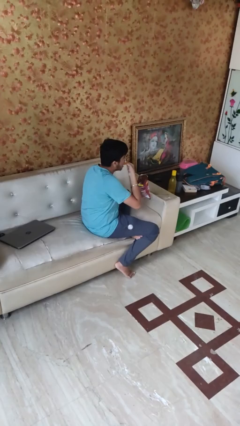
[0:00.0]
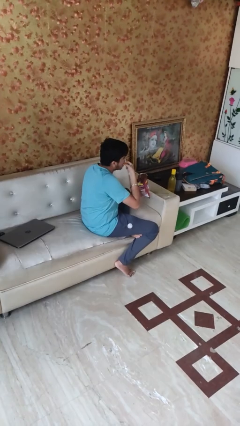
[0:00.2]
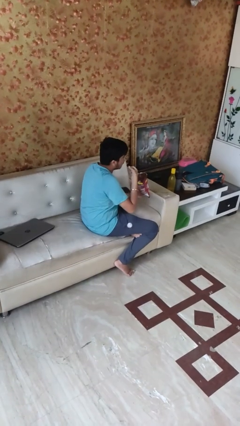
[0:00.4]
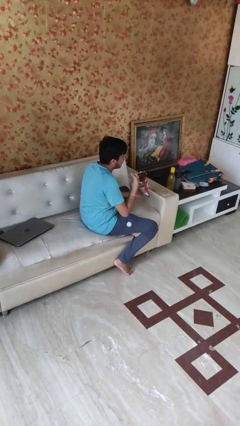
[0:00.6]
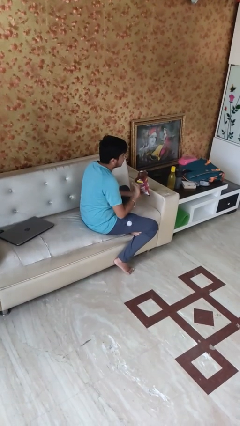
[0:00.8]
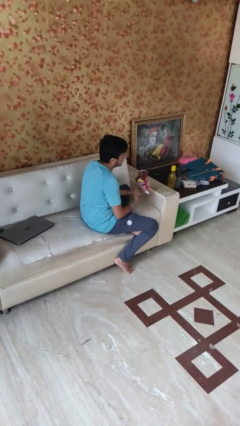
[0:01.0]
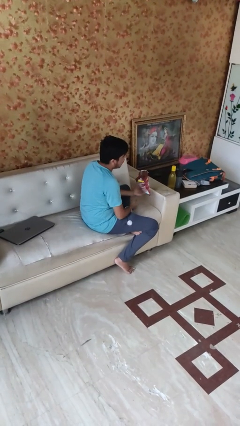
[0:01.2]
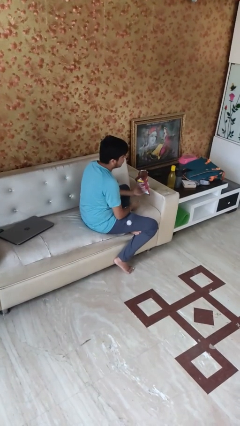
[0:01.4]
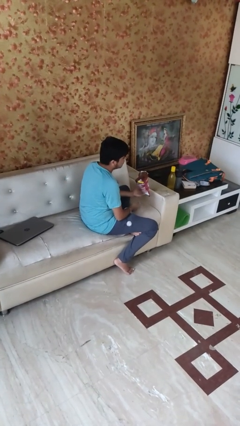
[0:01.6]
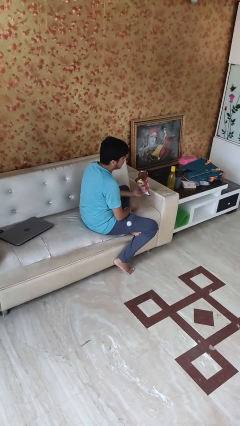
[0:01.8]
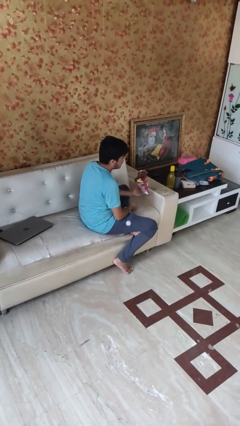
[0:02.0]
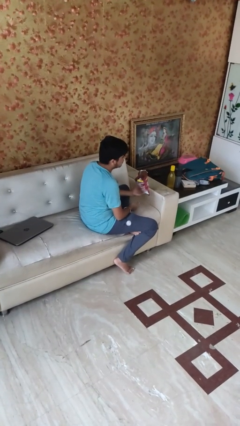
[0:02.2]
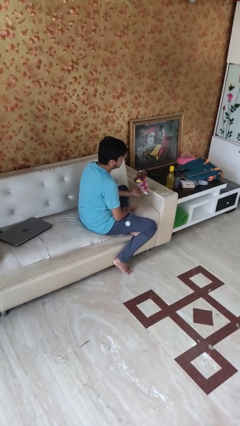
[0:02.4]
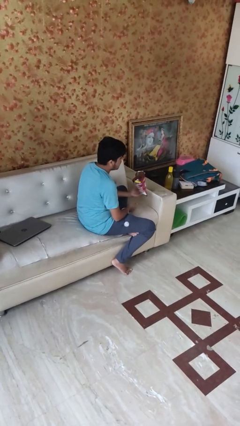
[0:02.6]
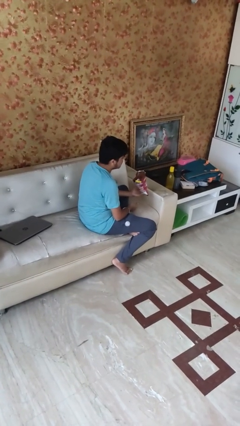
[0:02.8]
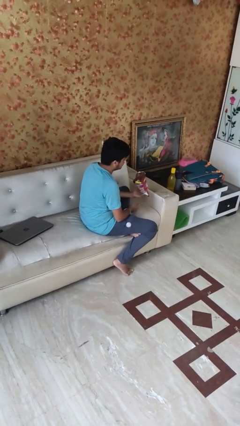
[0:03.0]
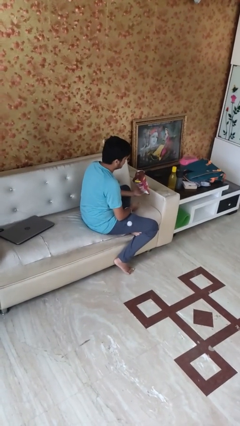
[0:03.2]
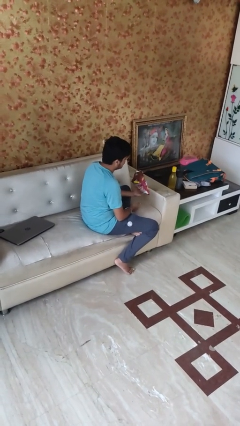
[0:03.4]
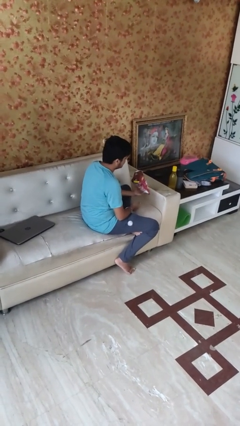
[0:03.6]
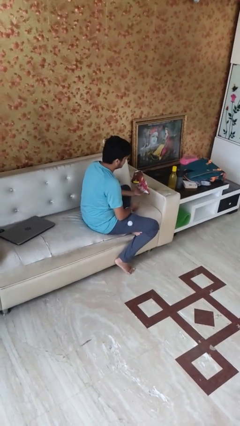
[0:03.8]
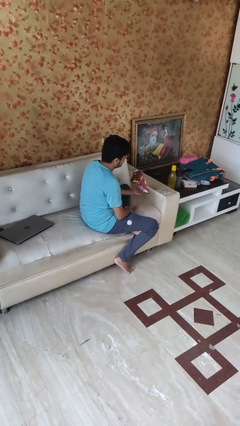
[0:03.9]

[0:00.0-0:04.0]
person eats snack from bag

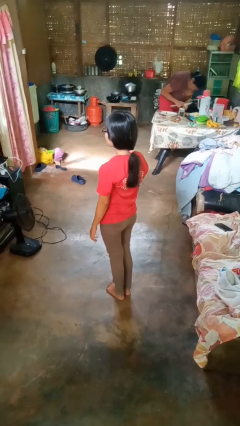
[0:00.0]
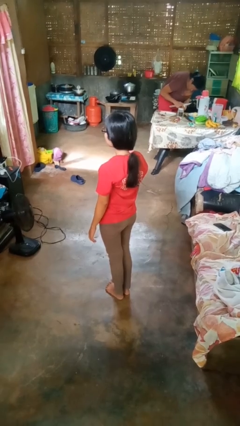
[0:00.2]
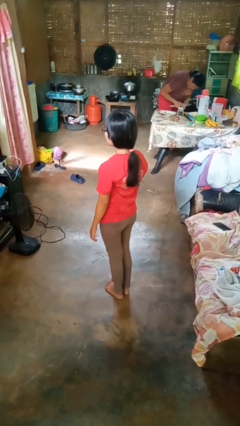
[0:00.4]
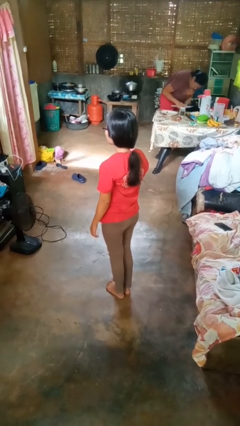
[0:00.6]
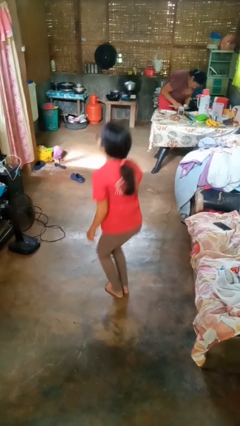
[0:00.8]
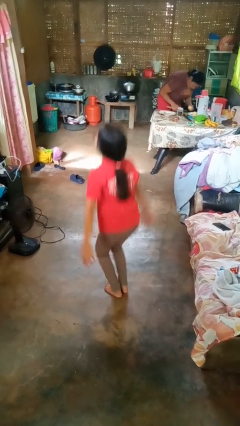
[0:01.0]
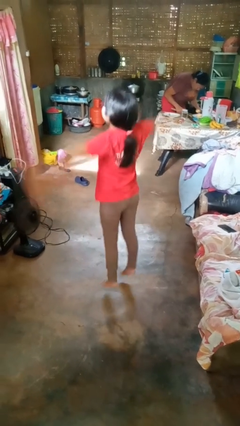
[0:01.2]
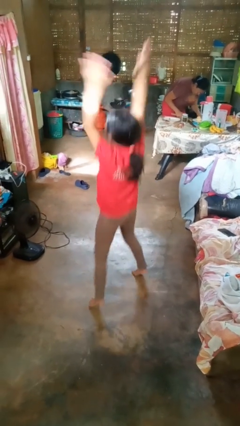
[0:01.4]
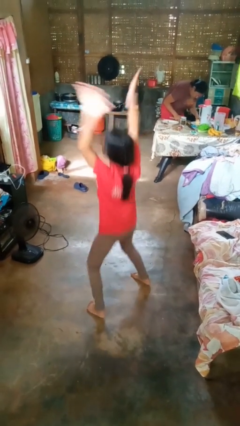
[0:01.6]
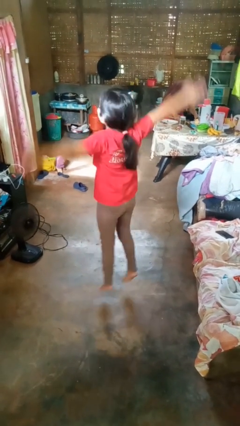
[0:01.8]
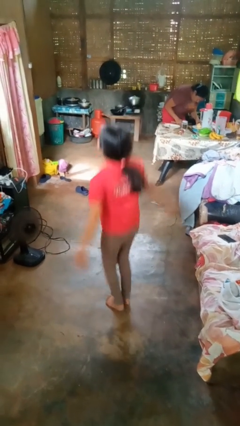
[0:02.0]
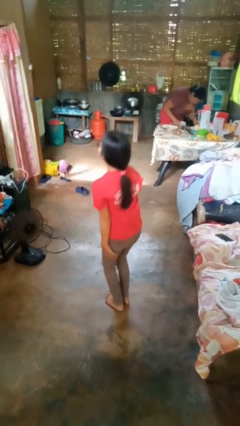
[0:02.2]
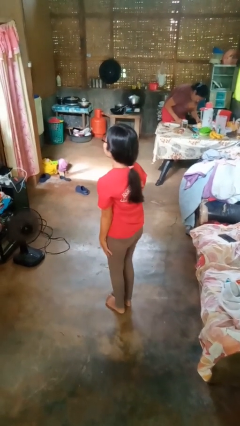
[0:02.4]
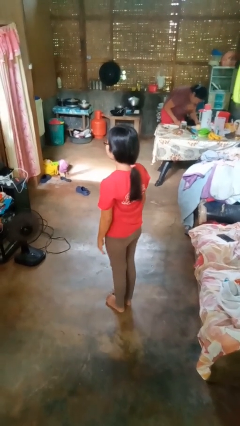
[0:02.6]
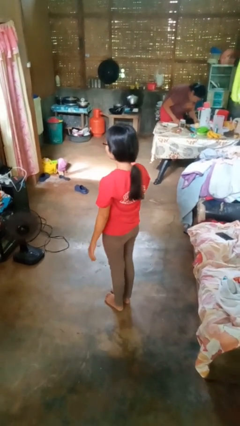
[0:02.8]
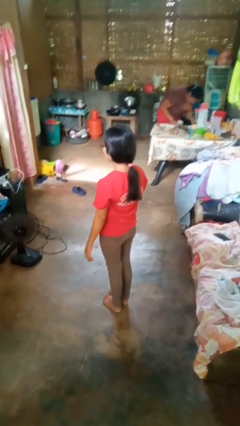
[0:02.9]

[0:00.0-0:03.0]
person exercises with jumping jacks

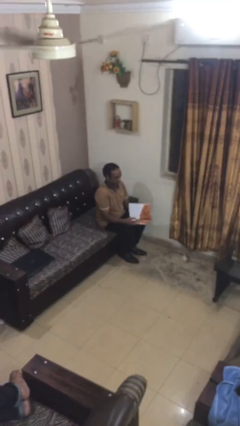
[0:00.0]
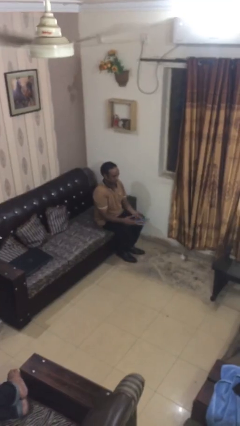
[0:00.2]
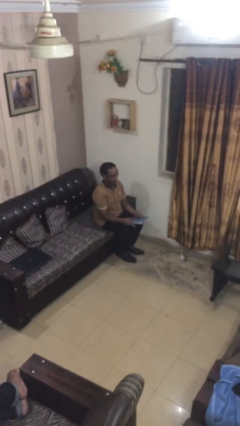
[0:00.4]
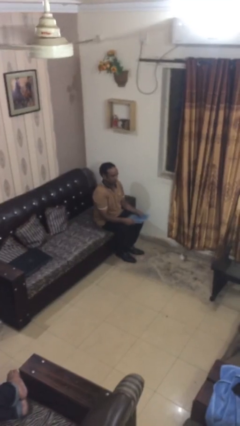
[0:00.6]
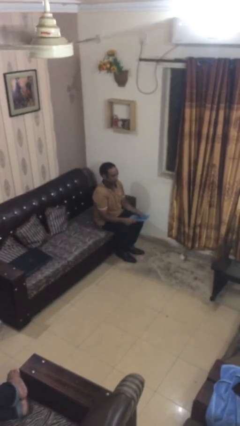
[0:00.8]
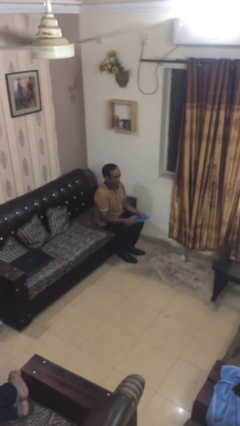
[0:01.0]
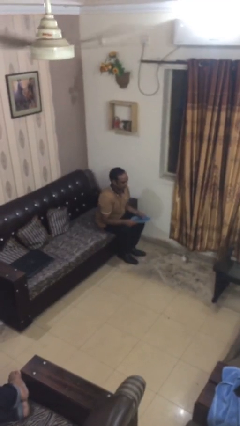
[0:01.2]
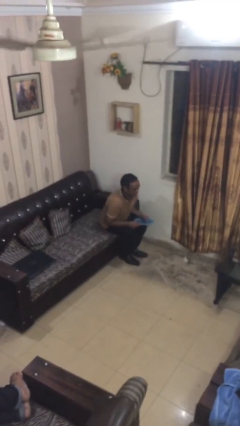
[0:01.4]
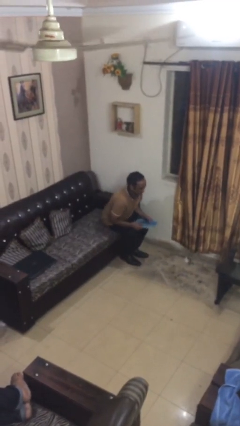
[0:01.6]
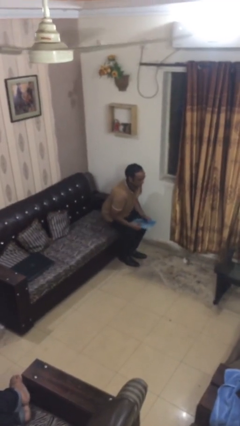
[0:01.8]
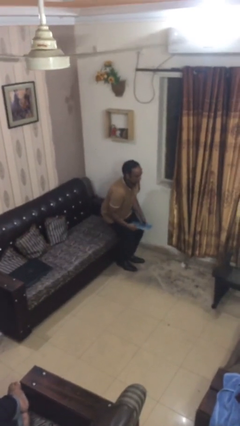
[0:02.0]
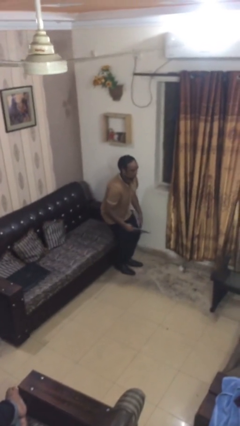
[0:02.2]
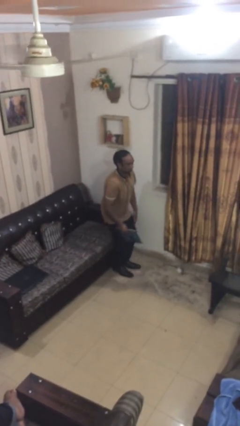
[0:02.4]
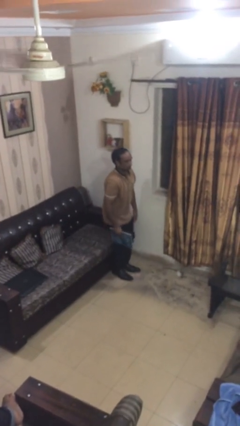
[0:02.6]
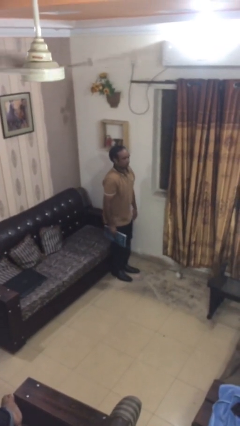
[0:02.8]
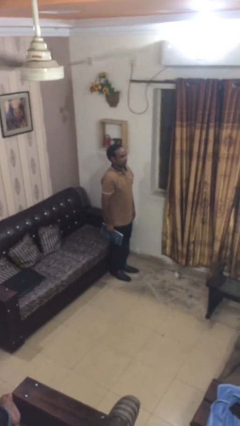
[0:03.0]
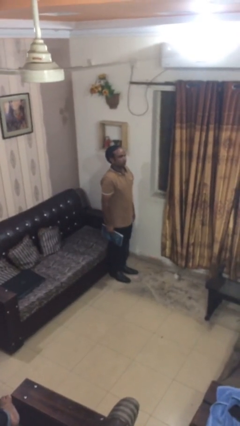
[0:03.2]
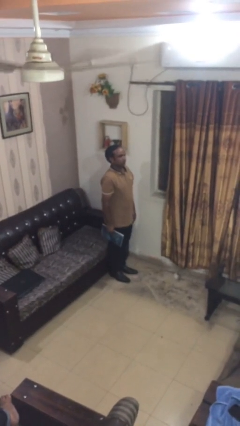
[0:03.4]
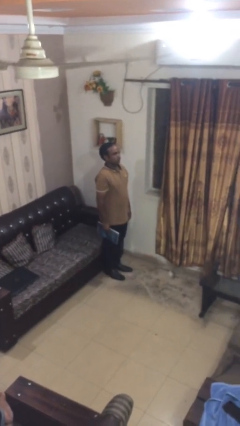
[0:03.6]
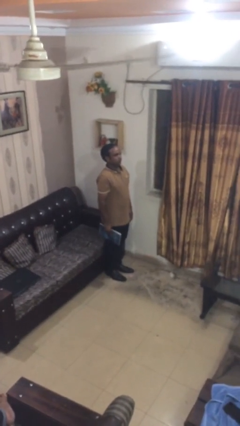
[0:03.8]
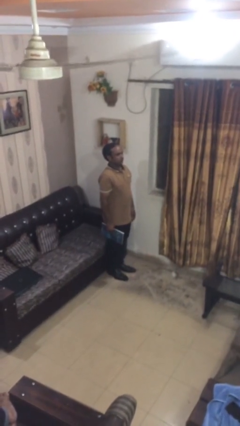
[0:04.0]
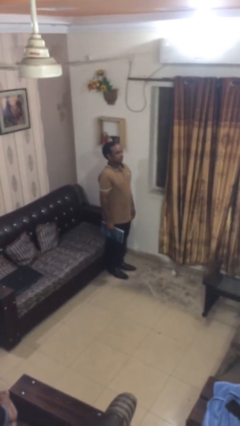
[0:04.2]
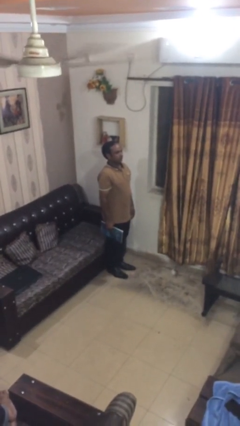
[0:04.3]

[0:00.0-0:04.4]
person stands up

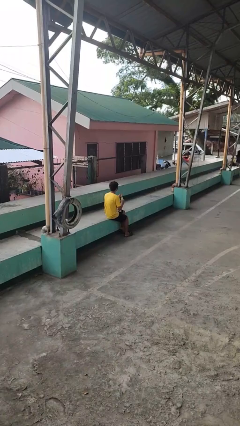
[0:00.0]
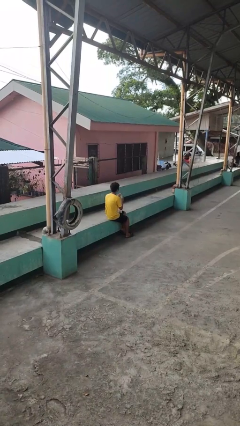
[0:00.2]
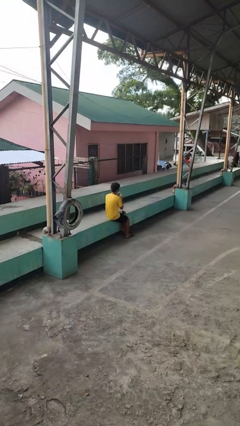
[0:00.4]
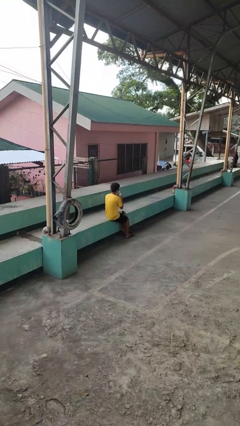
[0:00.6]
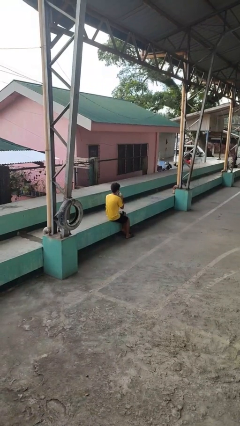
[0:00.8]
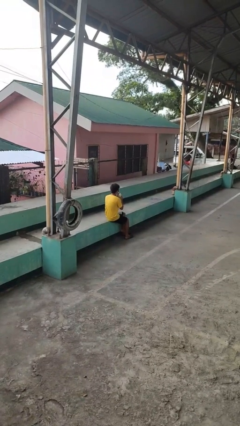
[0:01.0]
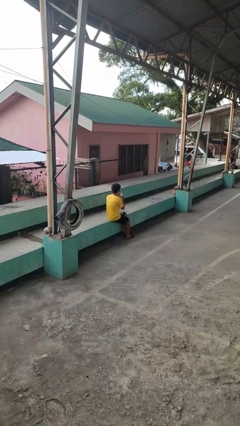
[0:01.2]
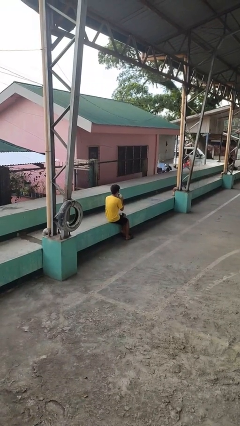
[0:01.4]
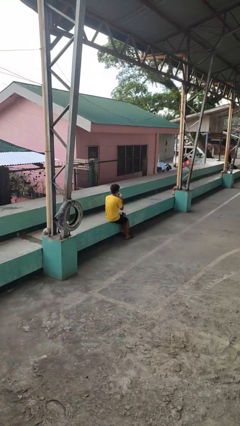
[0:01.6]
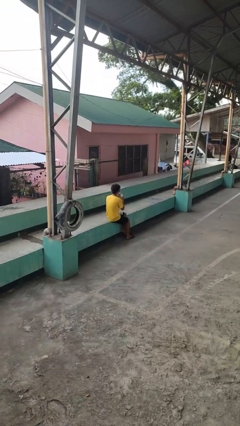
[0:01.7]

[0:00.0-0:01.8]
person drinks from straw

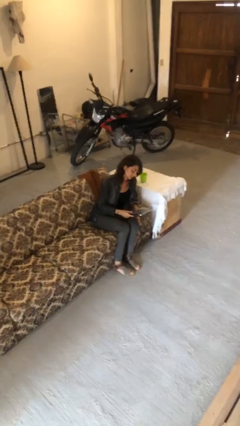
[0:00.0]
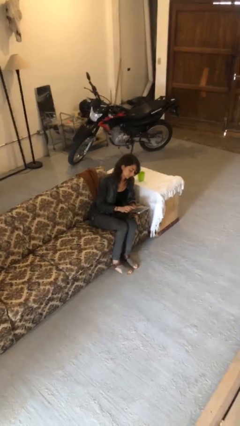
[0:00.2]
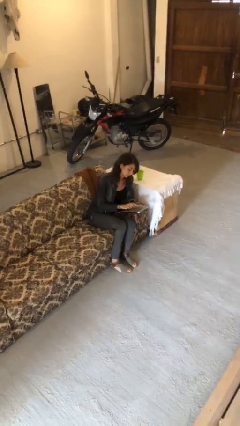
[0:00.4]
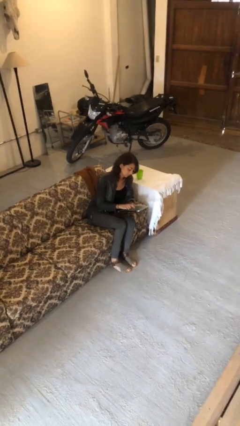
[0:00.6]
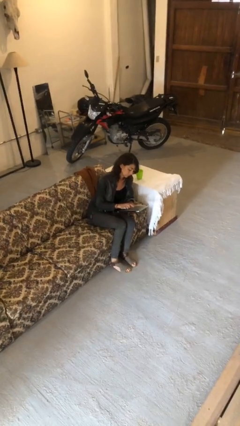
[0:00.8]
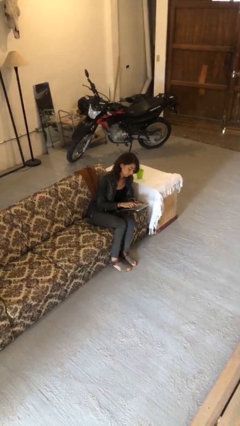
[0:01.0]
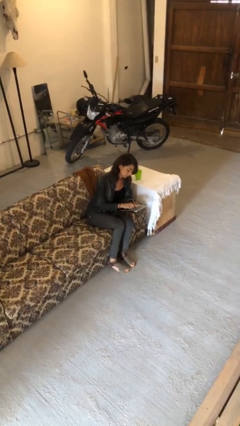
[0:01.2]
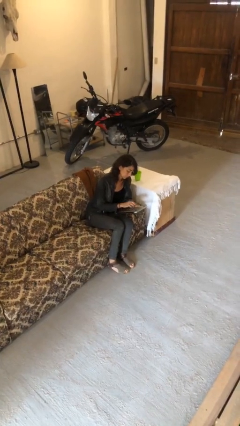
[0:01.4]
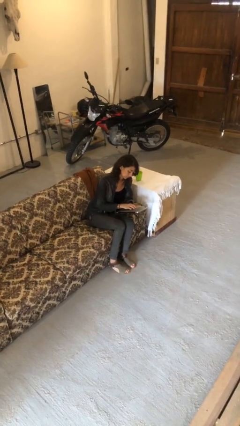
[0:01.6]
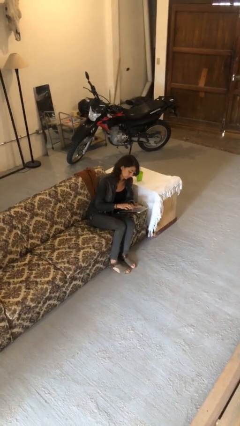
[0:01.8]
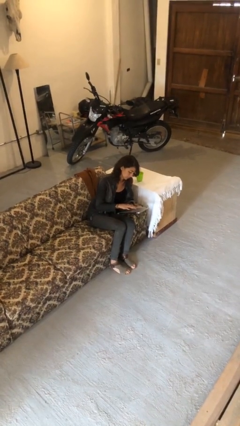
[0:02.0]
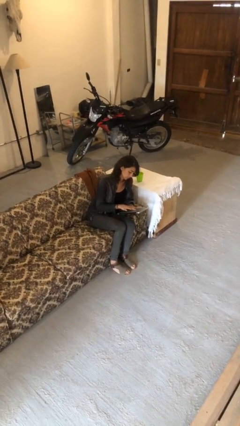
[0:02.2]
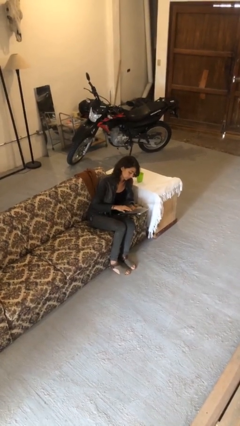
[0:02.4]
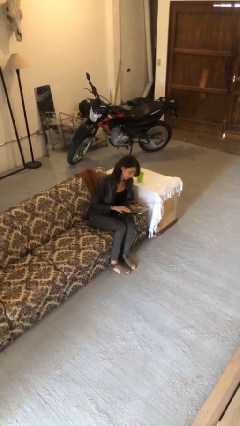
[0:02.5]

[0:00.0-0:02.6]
person interacts with tablet

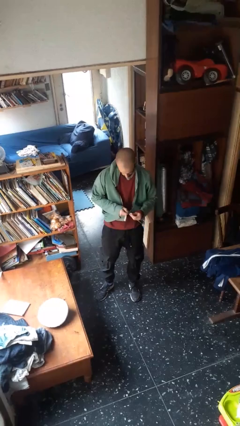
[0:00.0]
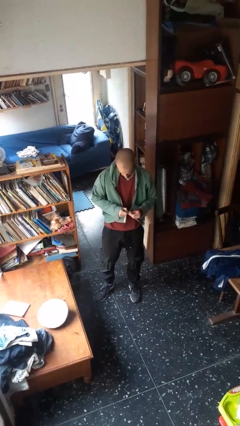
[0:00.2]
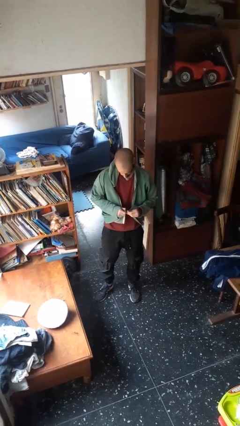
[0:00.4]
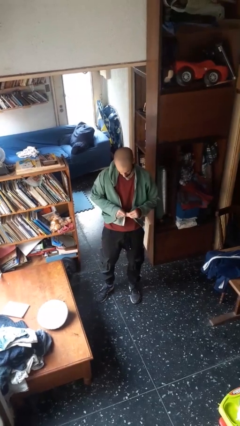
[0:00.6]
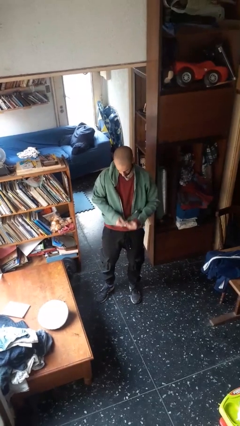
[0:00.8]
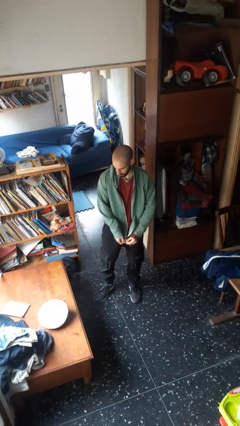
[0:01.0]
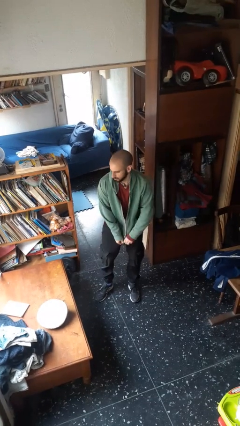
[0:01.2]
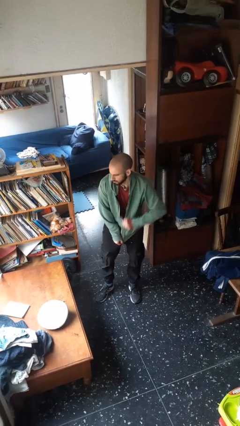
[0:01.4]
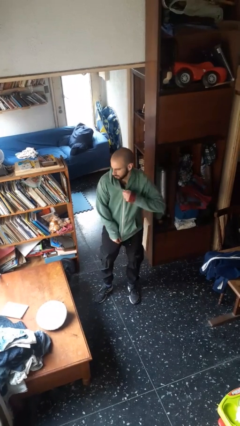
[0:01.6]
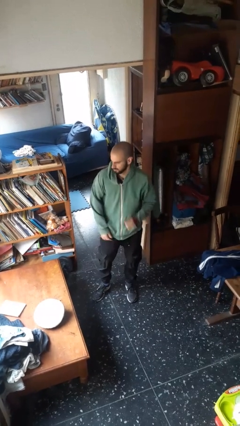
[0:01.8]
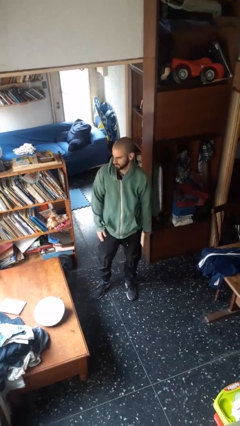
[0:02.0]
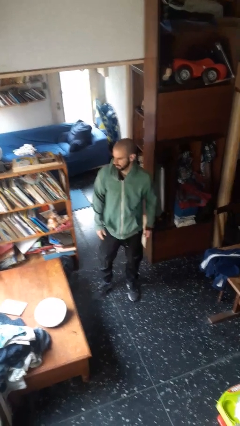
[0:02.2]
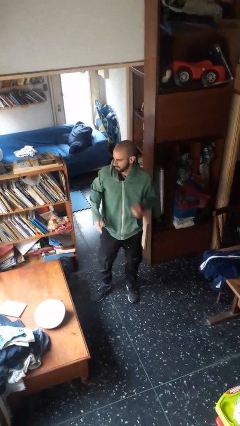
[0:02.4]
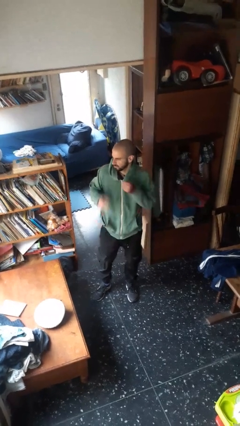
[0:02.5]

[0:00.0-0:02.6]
person zips up jacket
